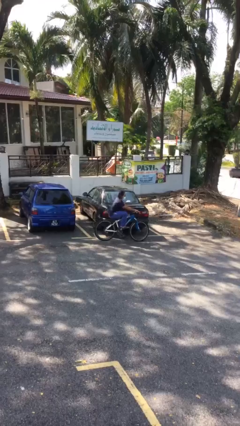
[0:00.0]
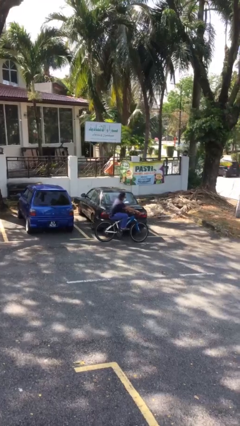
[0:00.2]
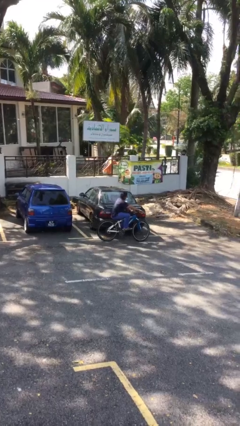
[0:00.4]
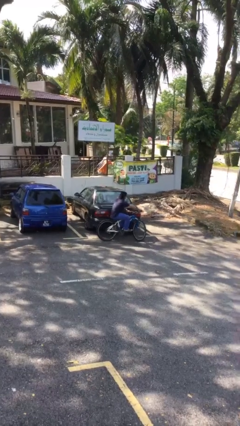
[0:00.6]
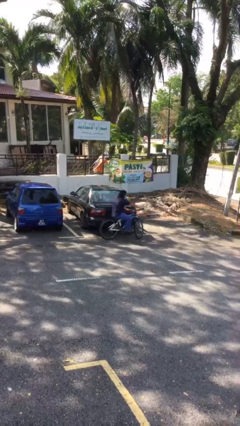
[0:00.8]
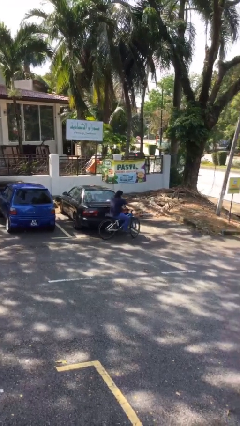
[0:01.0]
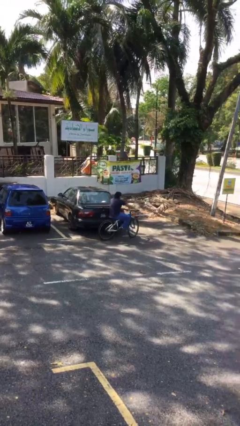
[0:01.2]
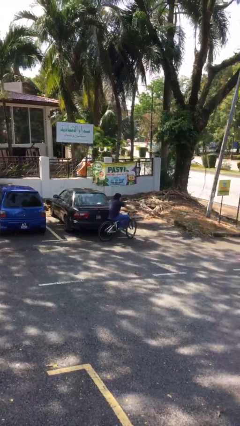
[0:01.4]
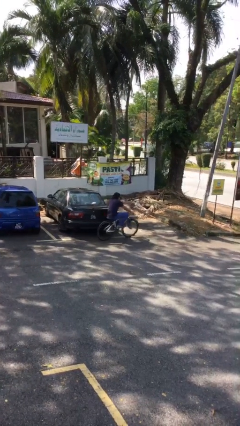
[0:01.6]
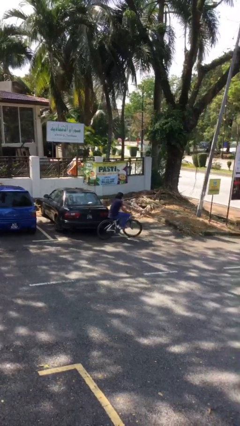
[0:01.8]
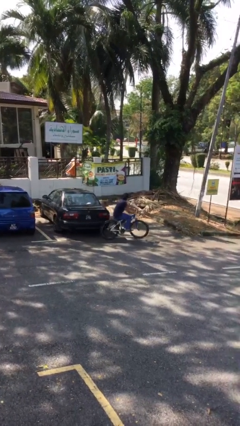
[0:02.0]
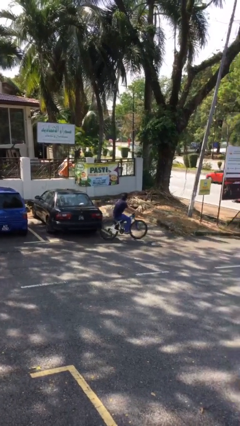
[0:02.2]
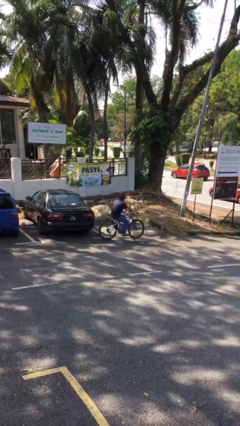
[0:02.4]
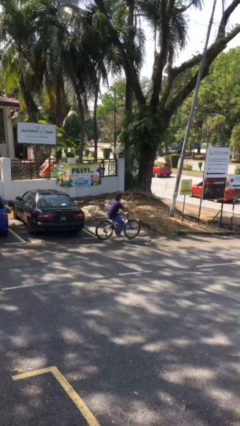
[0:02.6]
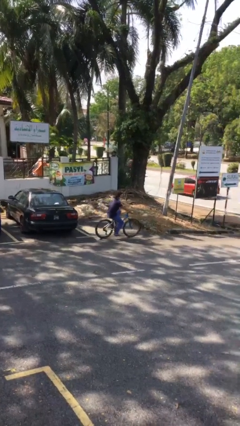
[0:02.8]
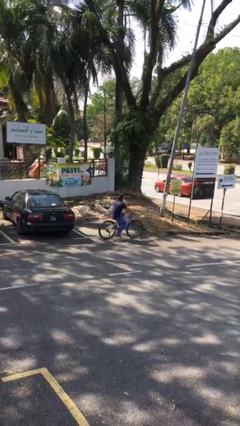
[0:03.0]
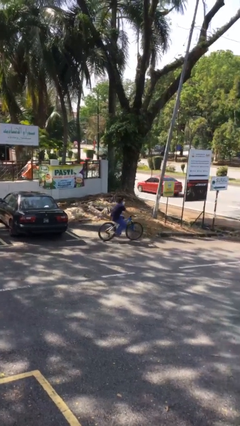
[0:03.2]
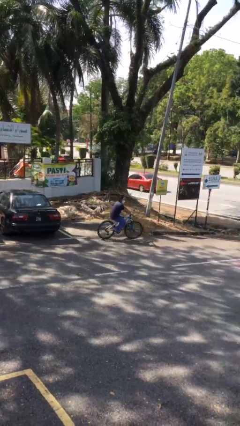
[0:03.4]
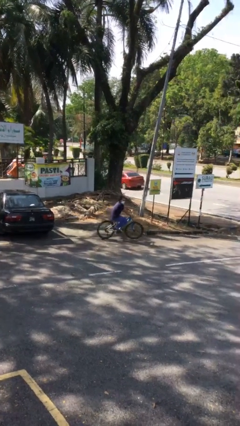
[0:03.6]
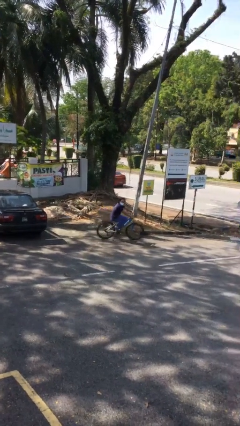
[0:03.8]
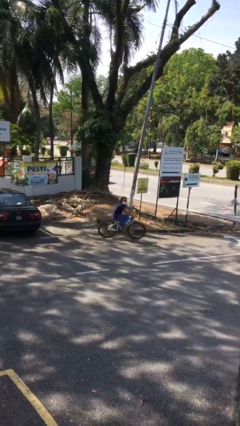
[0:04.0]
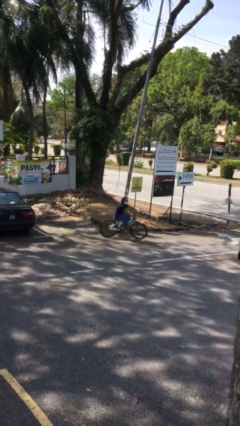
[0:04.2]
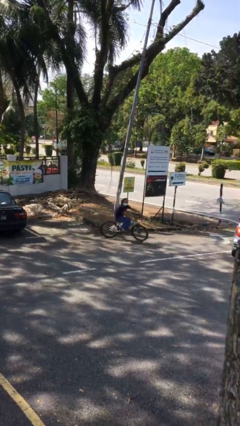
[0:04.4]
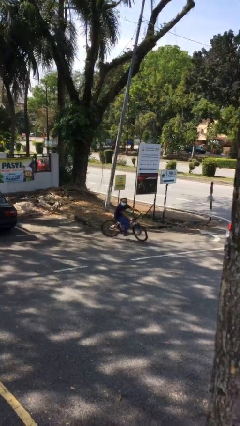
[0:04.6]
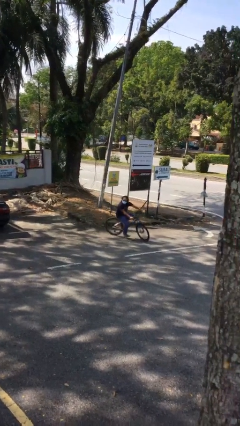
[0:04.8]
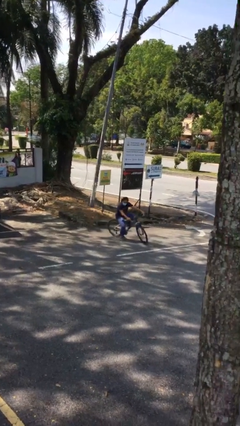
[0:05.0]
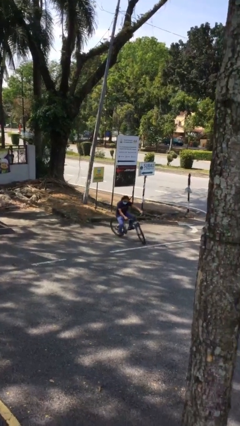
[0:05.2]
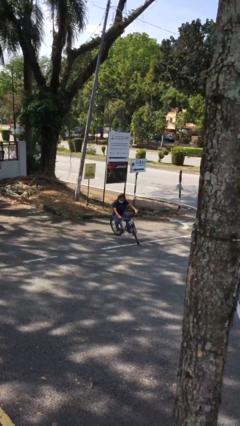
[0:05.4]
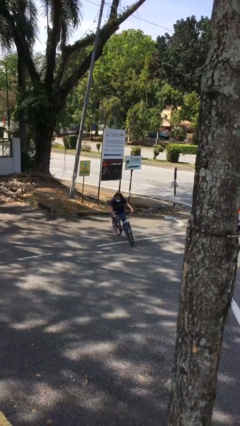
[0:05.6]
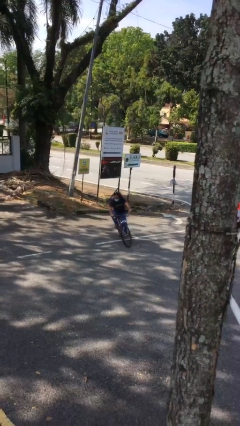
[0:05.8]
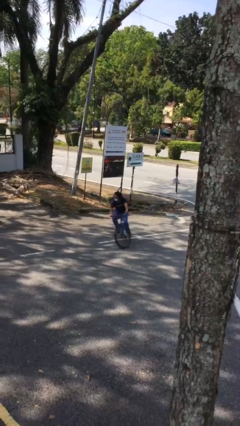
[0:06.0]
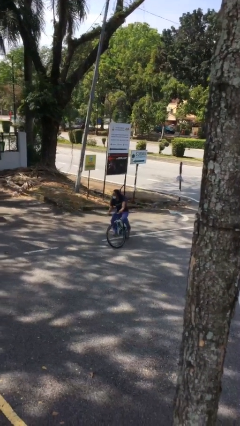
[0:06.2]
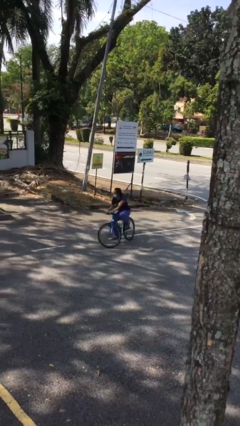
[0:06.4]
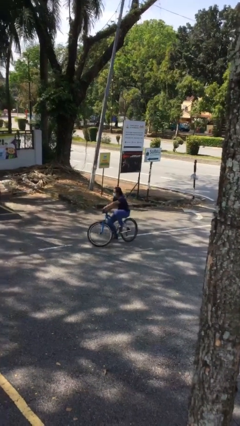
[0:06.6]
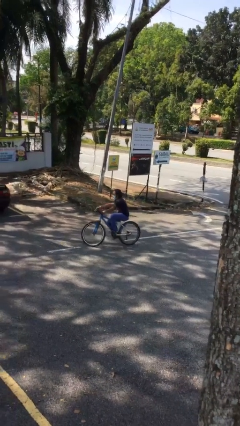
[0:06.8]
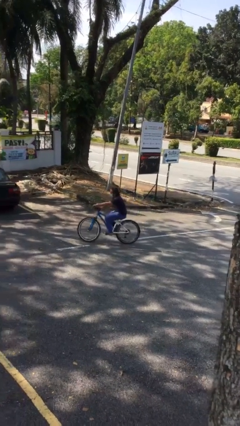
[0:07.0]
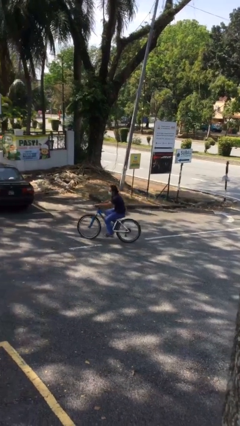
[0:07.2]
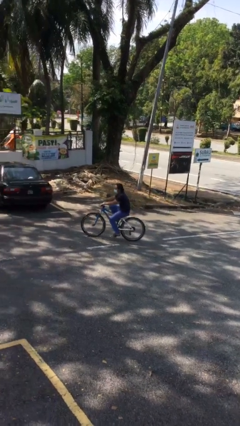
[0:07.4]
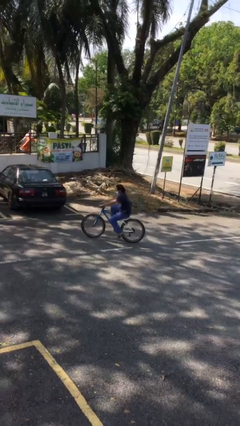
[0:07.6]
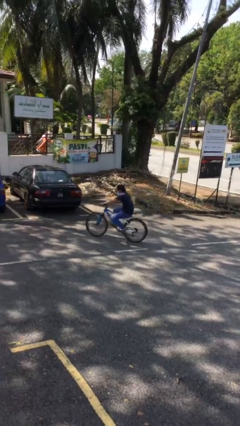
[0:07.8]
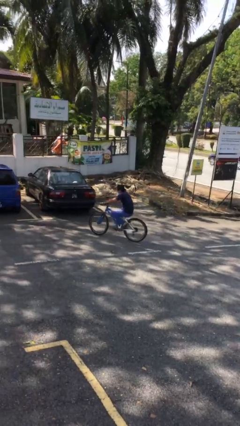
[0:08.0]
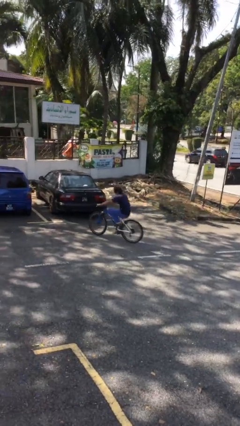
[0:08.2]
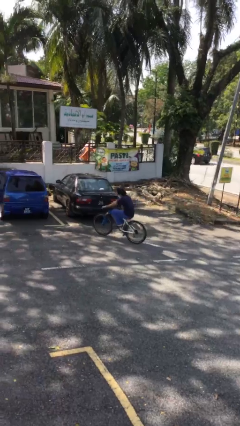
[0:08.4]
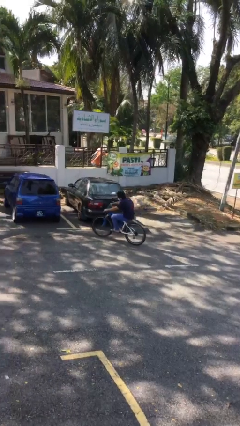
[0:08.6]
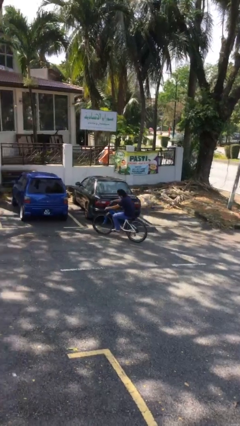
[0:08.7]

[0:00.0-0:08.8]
person rides bicycle

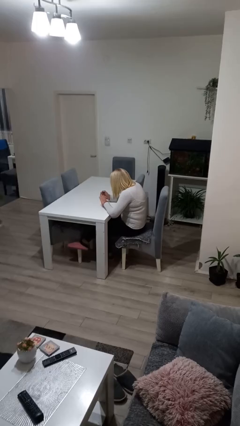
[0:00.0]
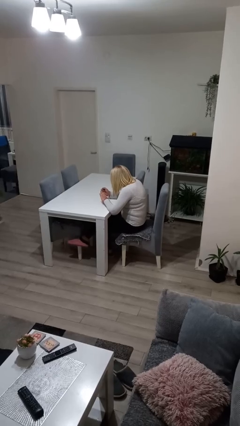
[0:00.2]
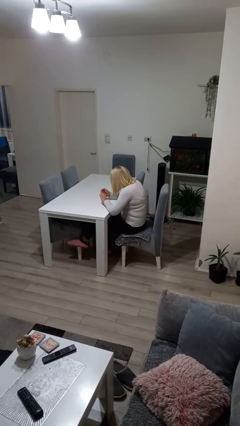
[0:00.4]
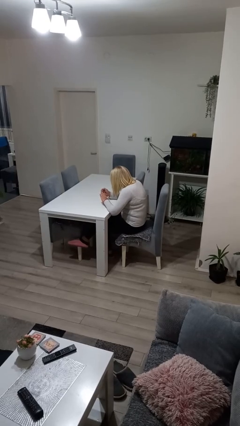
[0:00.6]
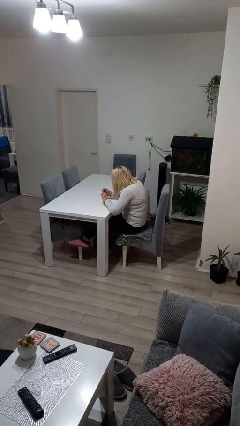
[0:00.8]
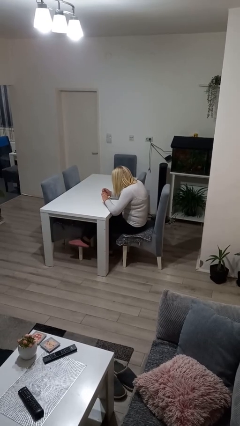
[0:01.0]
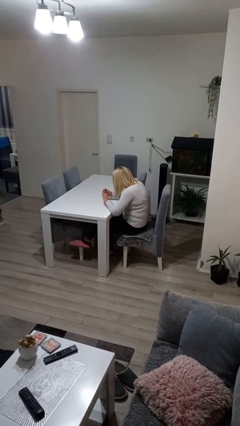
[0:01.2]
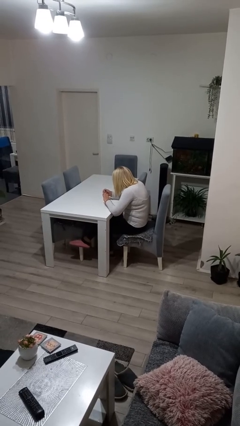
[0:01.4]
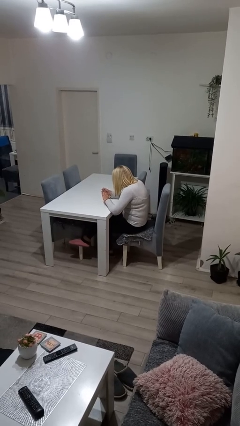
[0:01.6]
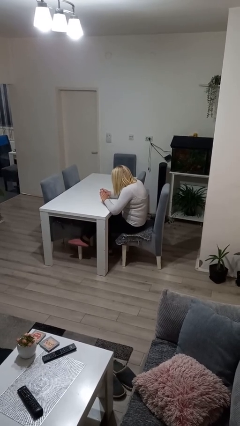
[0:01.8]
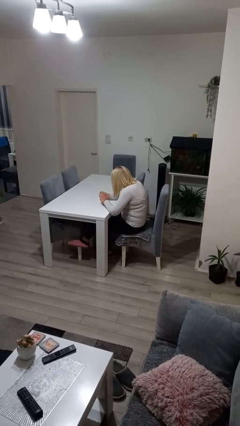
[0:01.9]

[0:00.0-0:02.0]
person clips fingernails

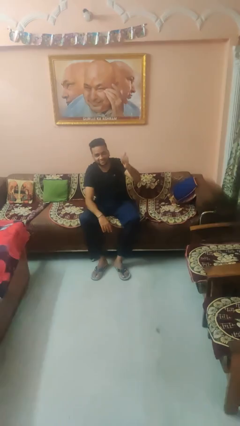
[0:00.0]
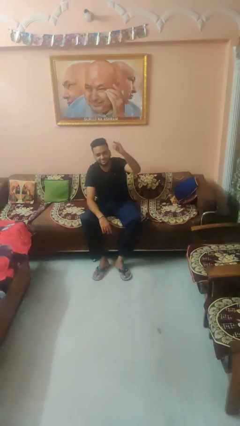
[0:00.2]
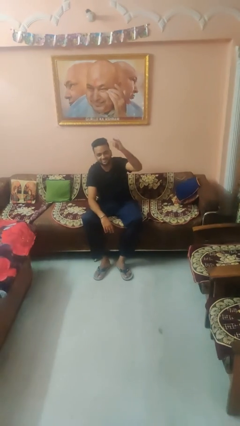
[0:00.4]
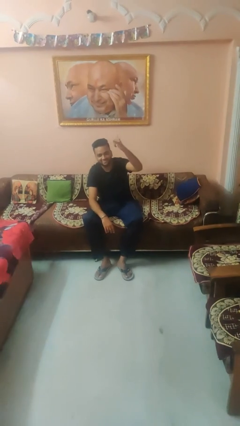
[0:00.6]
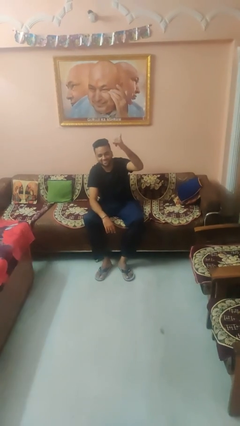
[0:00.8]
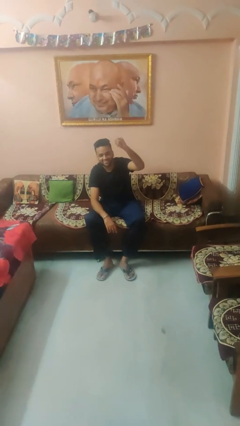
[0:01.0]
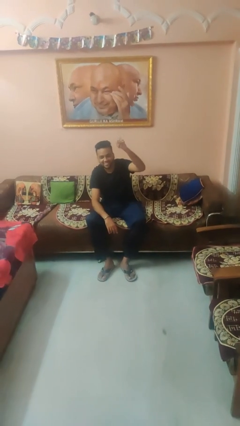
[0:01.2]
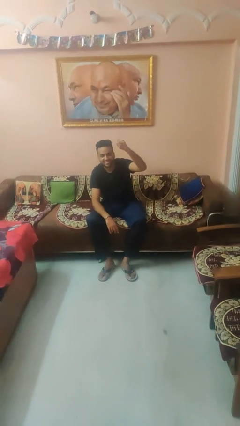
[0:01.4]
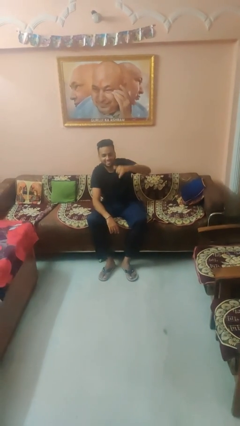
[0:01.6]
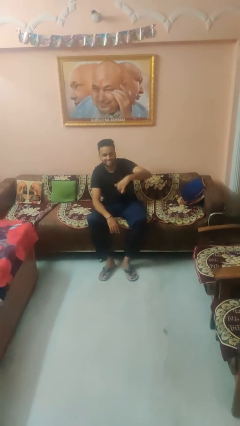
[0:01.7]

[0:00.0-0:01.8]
person gestures hang loose

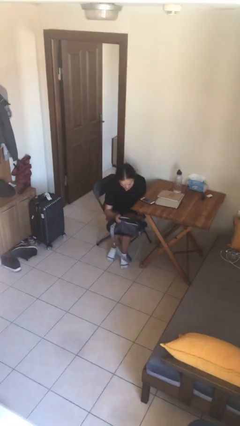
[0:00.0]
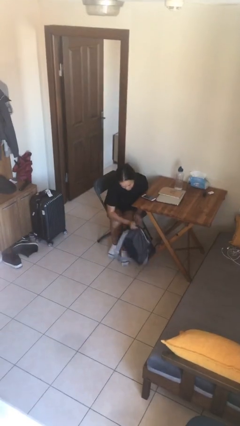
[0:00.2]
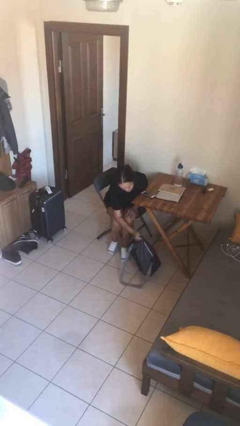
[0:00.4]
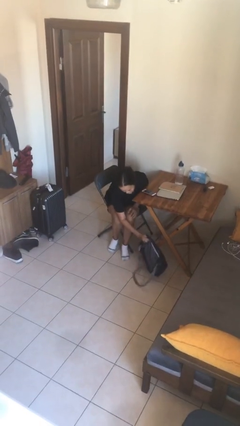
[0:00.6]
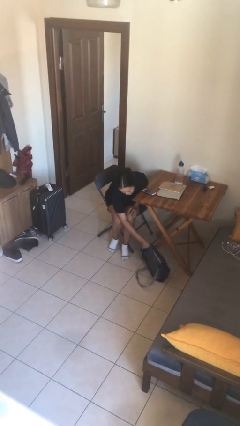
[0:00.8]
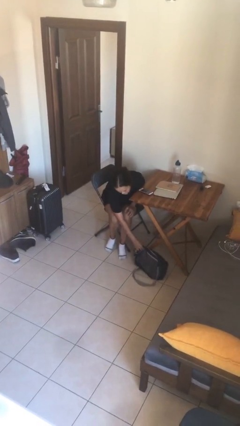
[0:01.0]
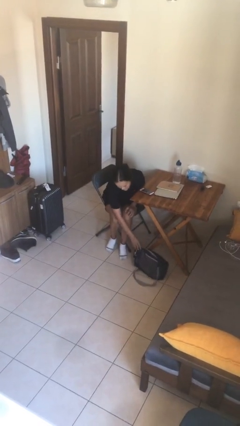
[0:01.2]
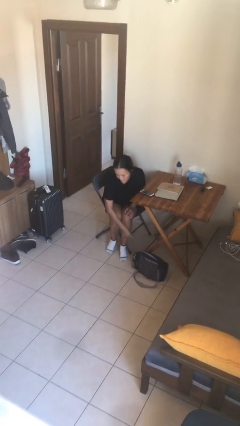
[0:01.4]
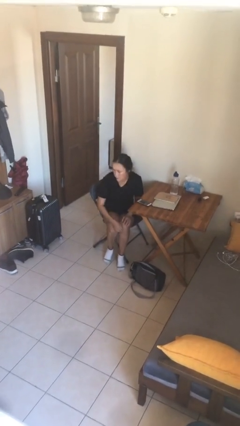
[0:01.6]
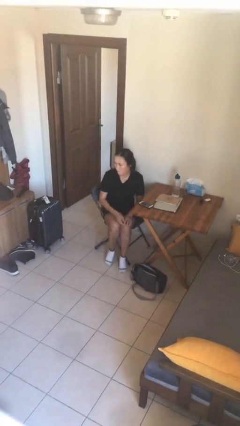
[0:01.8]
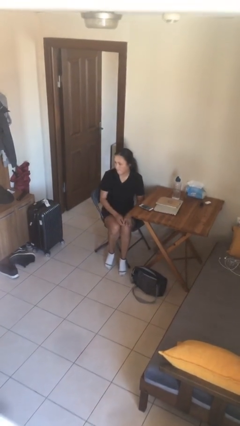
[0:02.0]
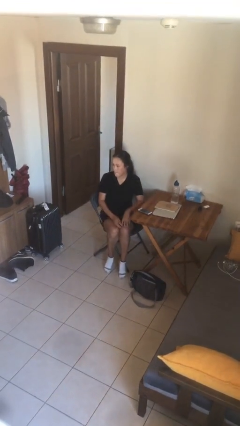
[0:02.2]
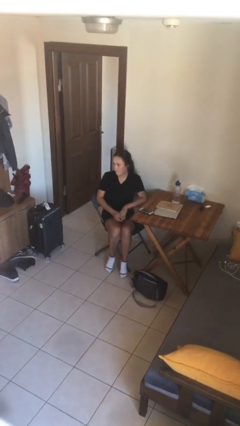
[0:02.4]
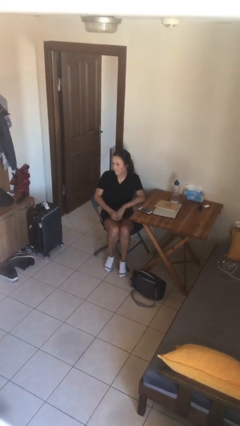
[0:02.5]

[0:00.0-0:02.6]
person puts down object on floor

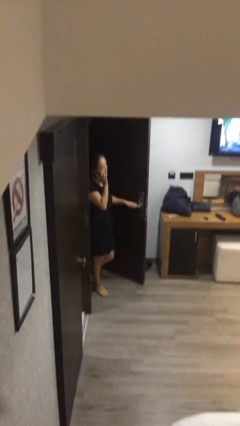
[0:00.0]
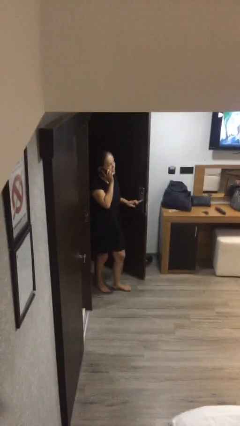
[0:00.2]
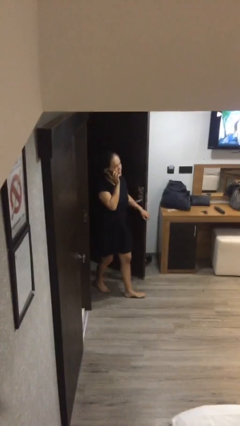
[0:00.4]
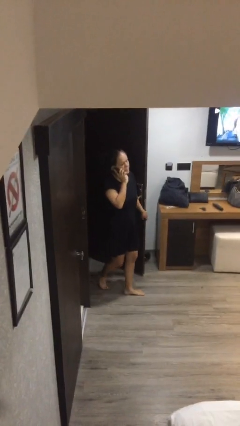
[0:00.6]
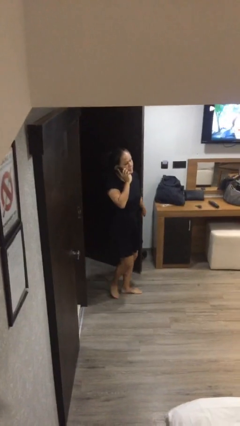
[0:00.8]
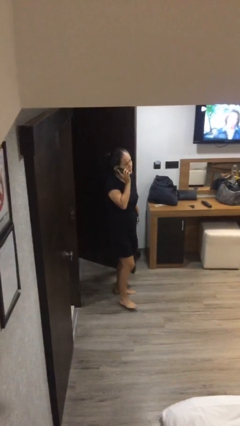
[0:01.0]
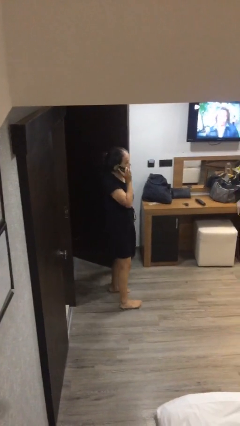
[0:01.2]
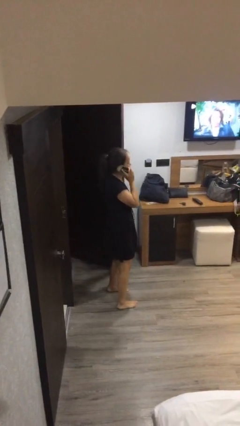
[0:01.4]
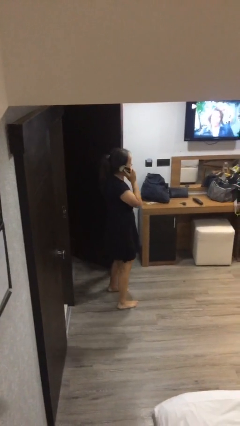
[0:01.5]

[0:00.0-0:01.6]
person enters scene through structure

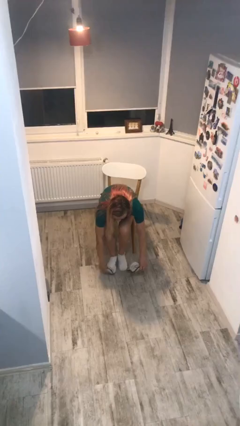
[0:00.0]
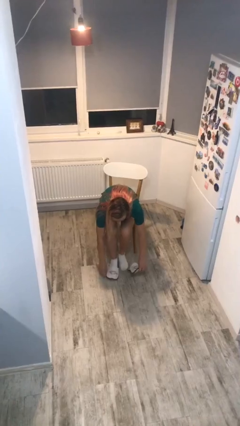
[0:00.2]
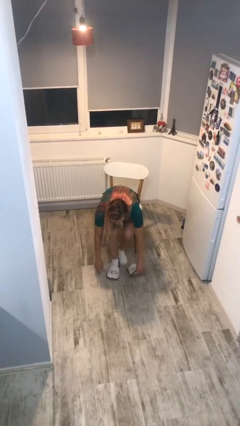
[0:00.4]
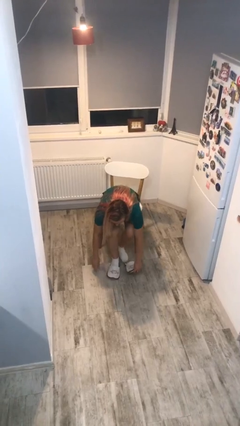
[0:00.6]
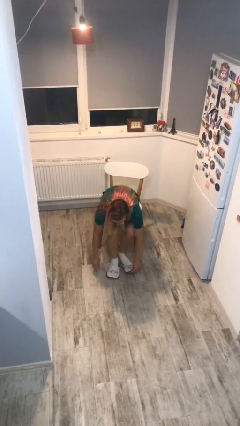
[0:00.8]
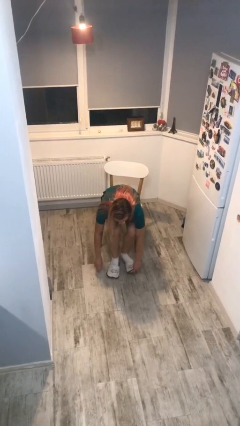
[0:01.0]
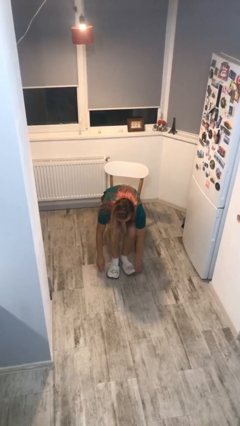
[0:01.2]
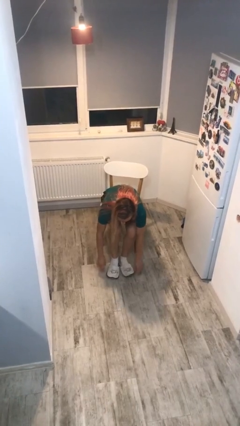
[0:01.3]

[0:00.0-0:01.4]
person puts on shoes
